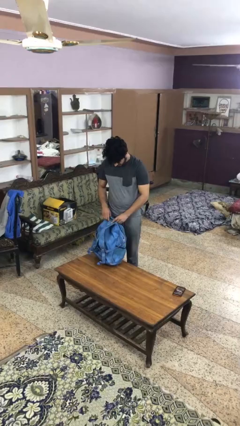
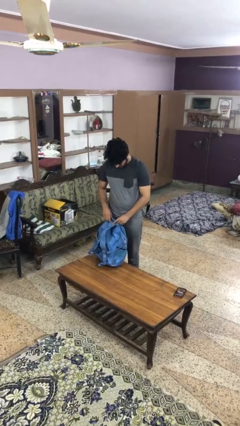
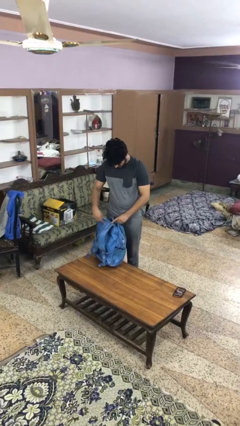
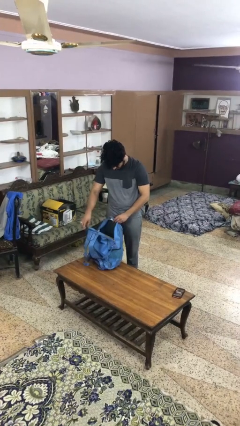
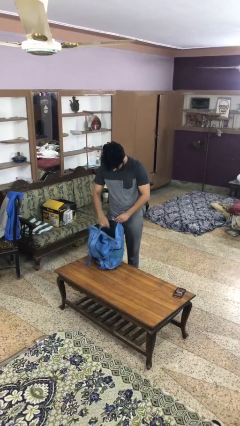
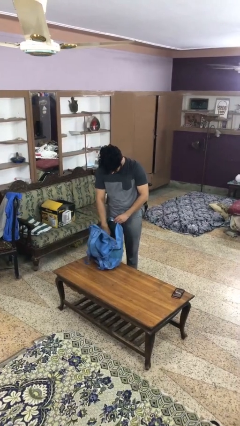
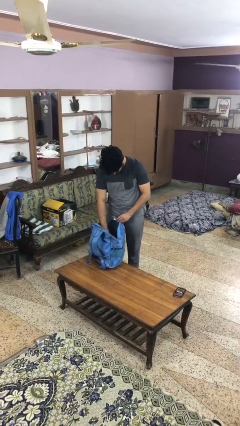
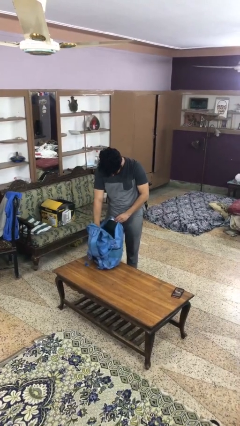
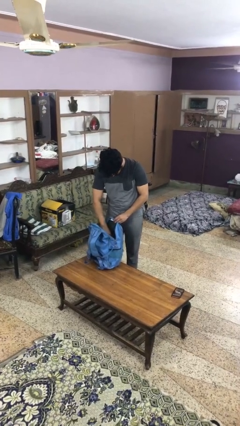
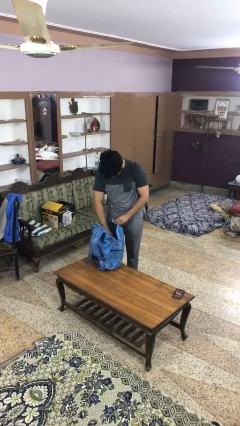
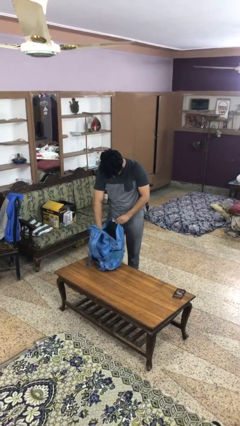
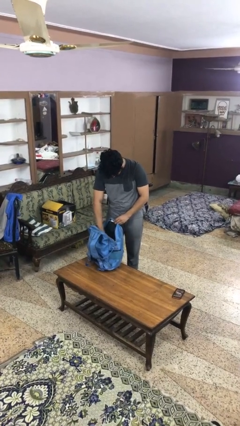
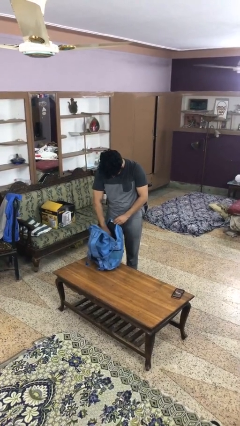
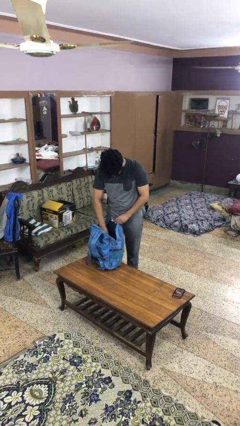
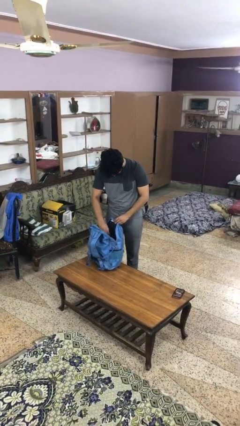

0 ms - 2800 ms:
person searches in bag

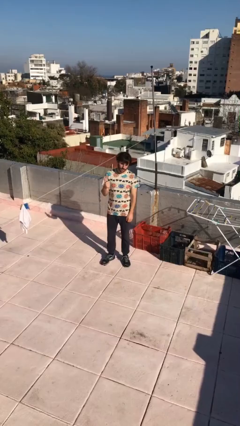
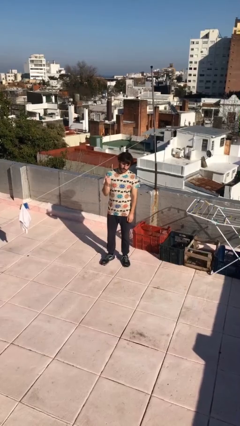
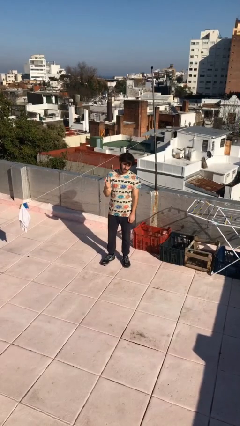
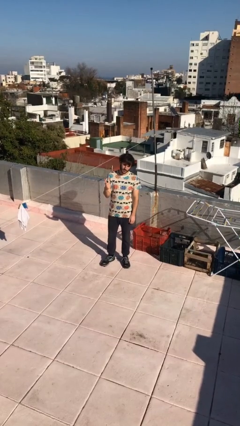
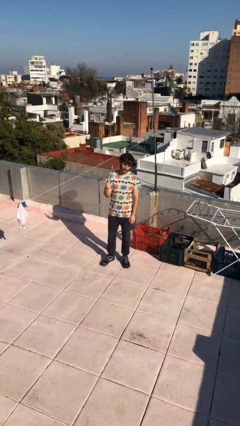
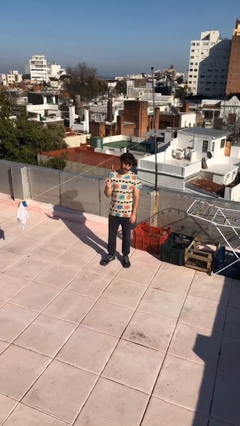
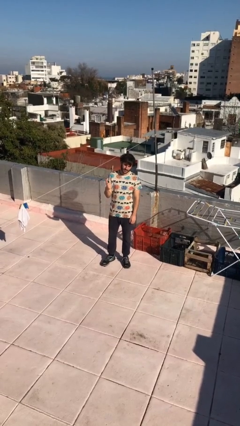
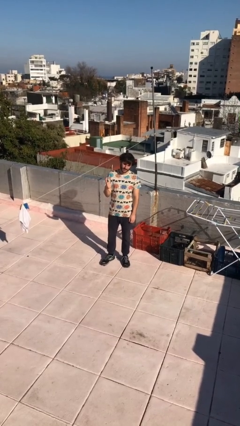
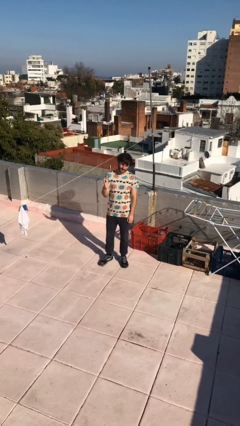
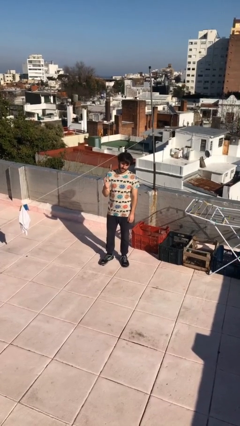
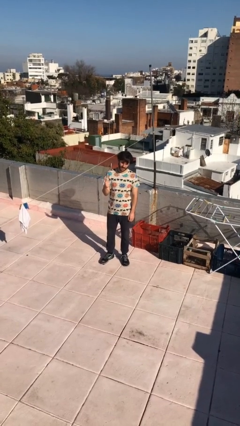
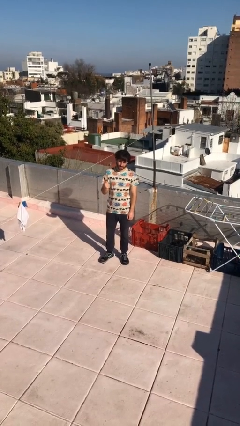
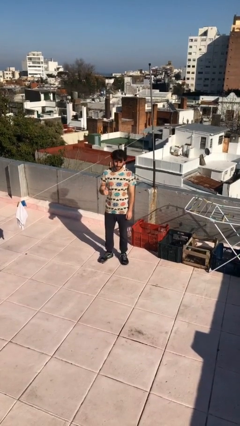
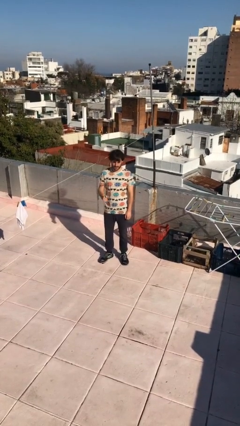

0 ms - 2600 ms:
person gestures thumbs up

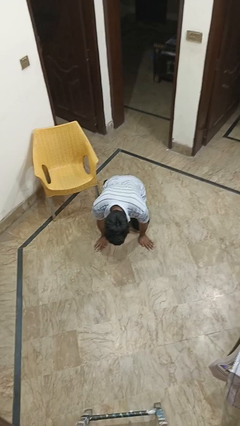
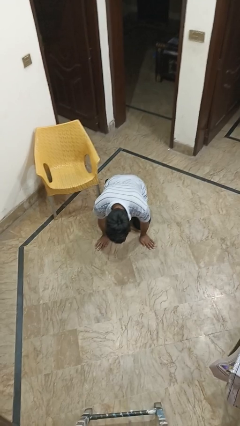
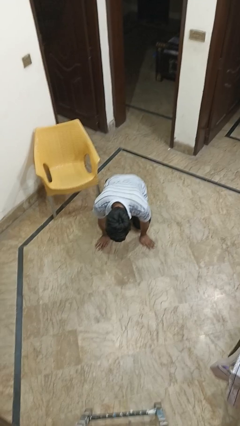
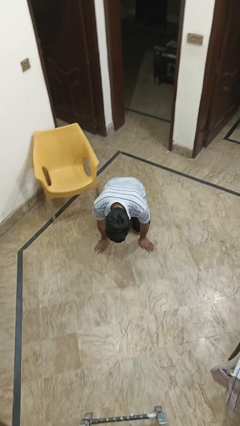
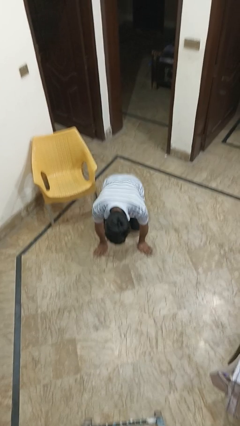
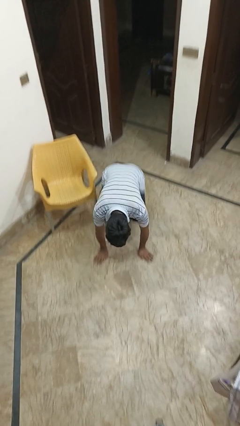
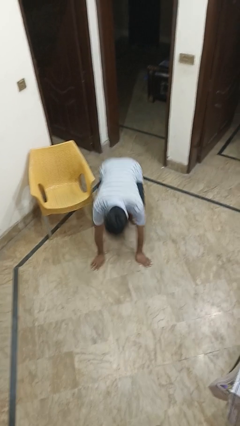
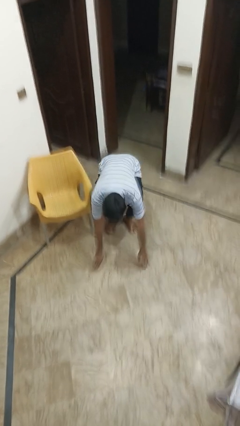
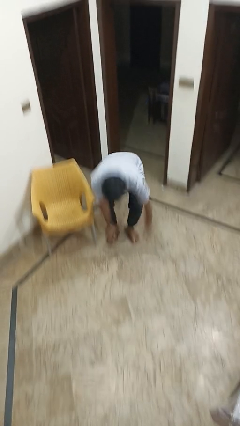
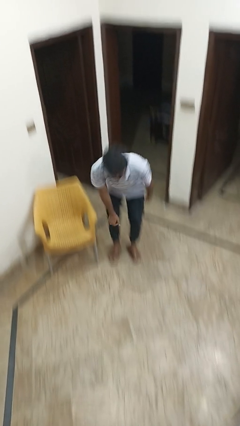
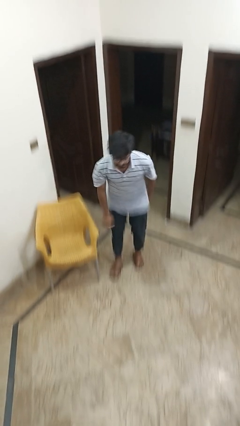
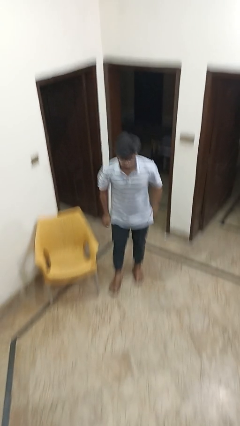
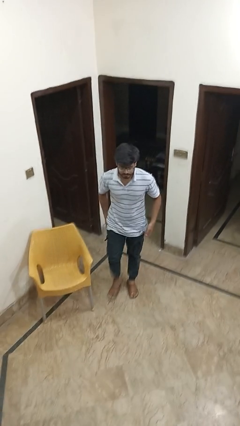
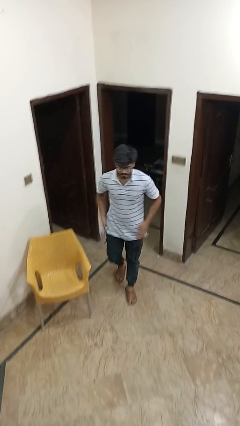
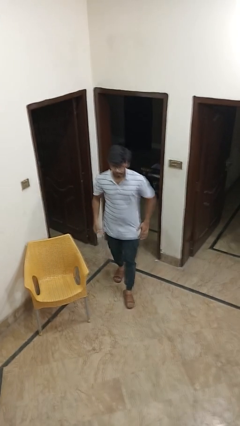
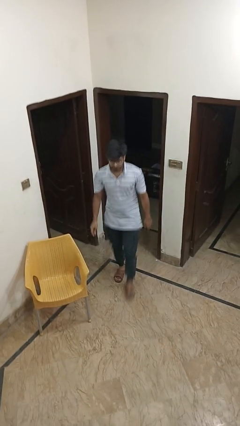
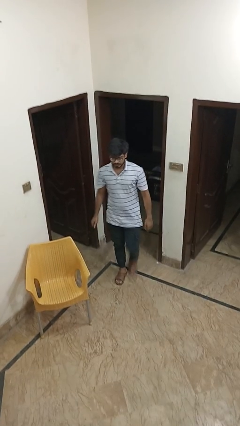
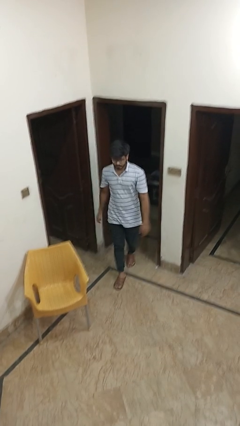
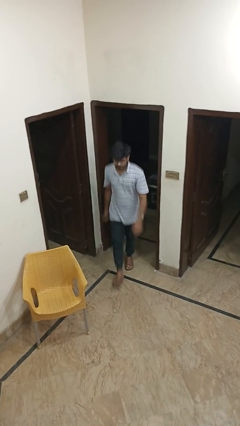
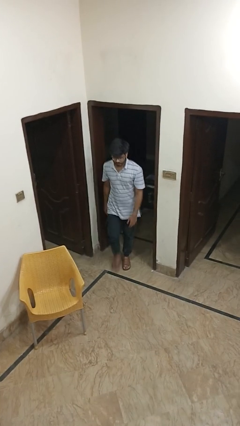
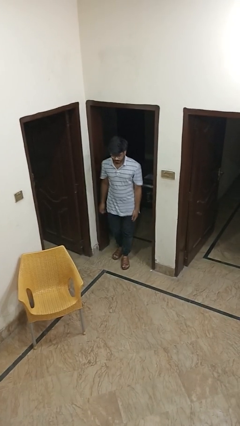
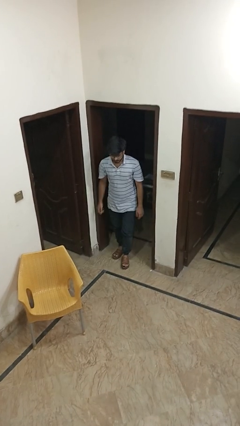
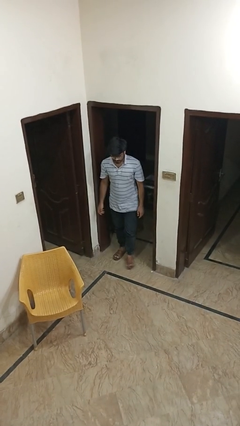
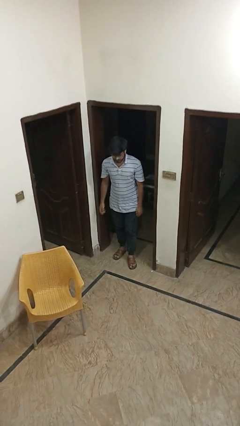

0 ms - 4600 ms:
person stands up from floor

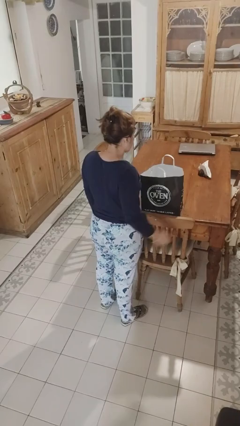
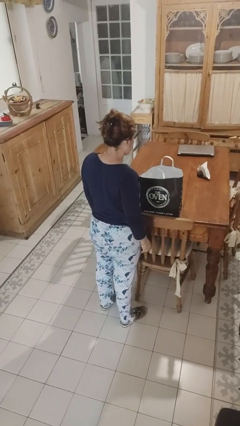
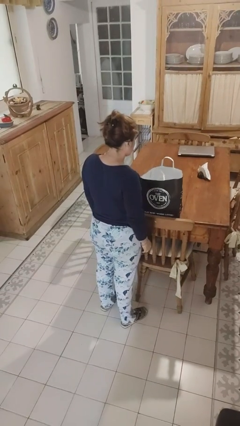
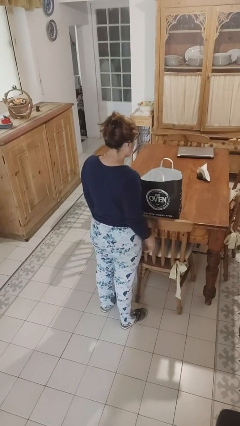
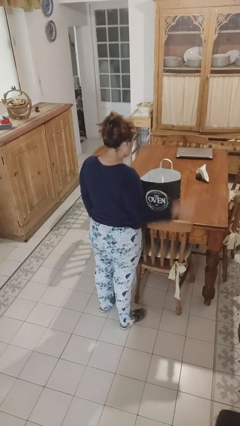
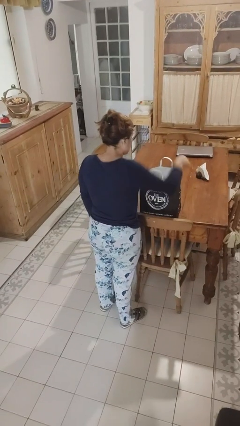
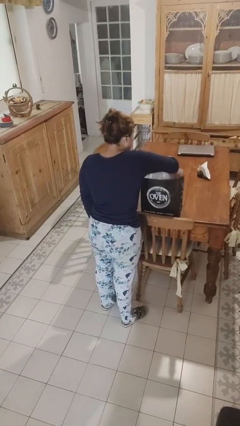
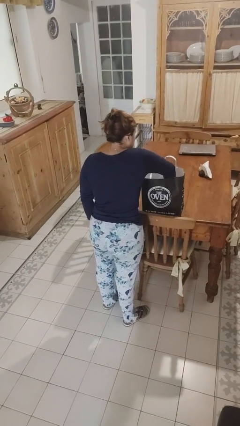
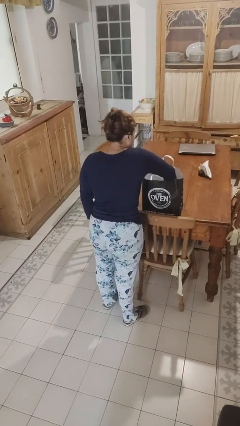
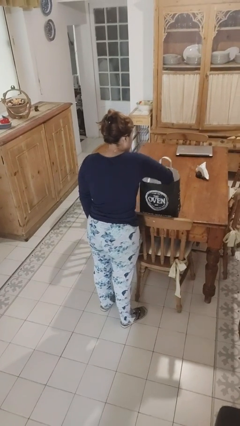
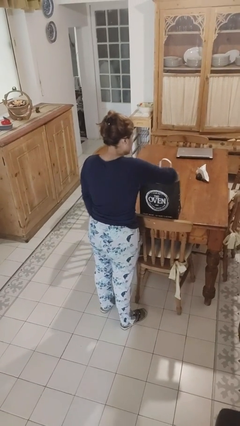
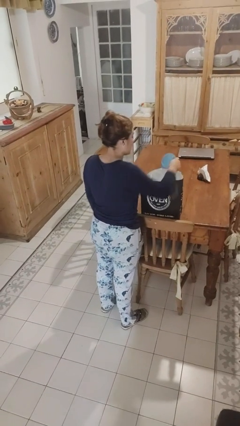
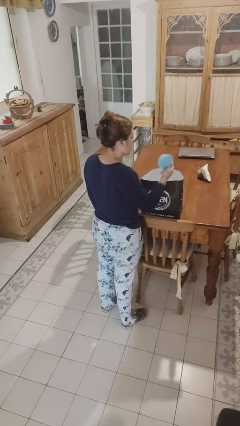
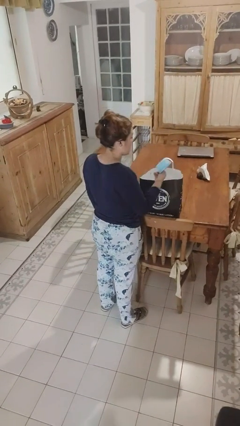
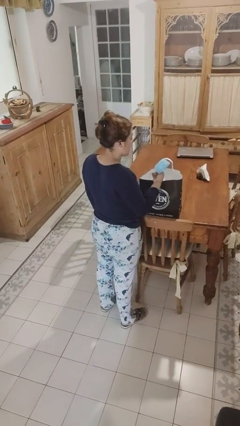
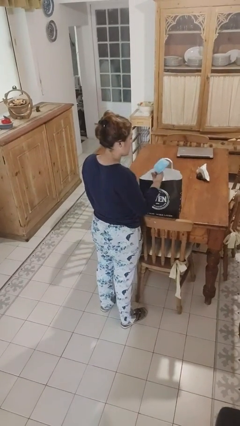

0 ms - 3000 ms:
person takes object from bag

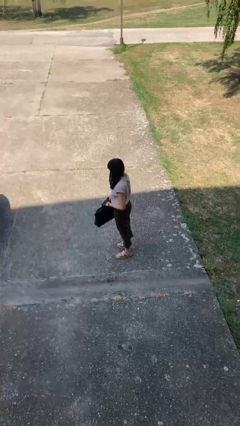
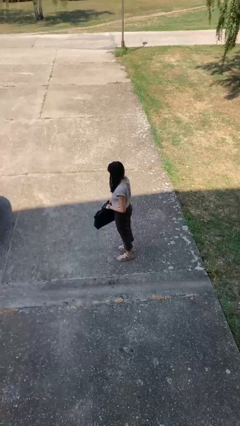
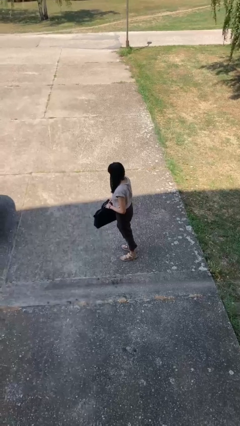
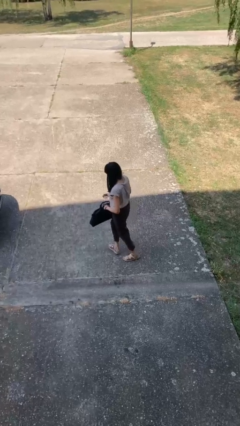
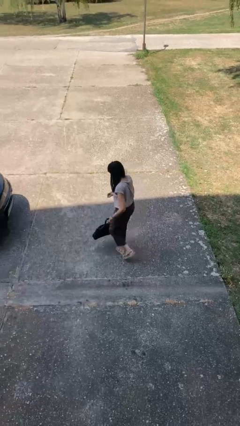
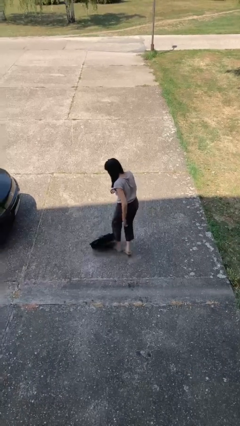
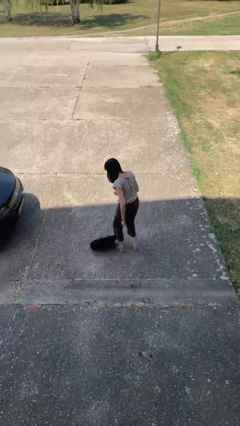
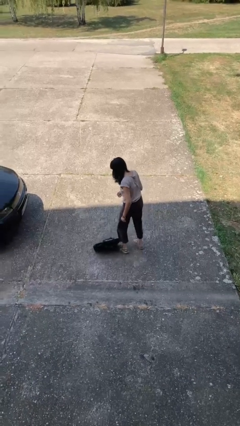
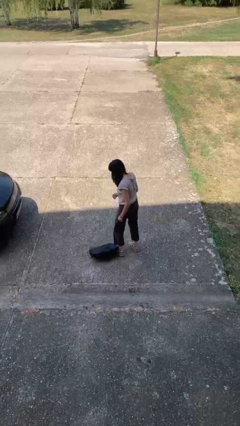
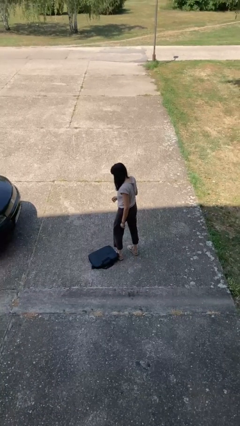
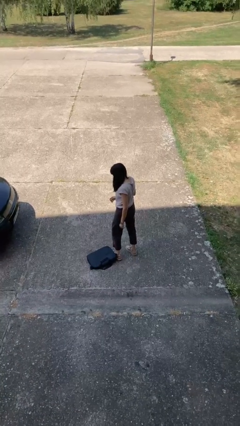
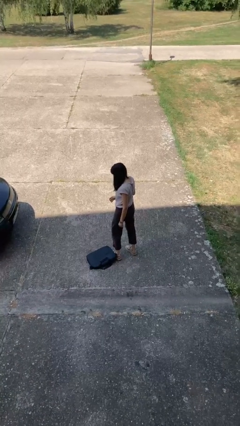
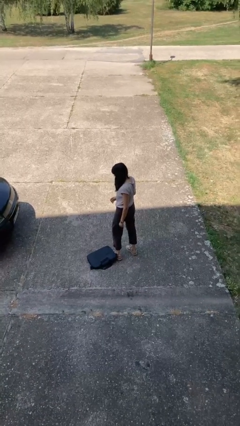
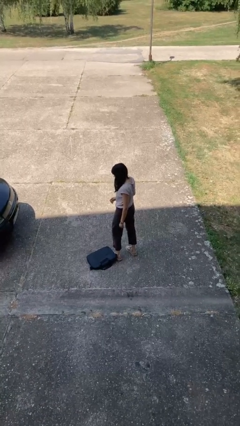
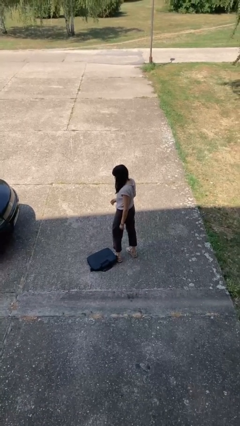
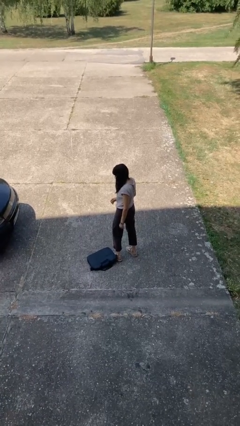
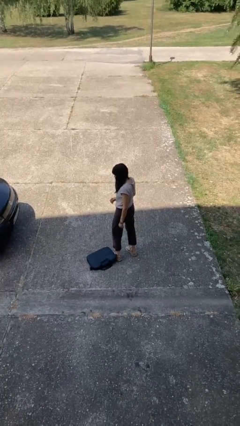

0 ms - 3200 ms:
person drops object

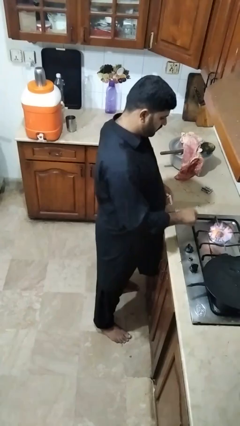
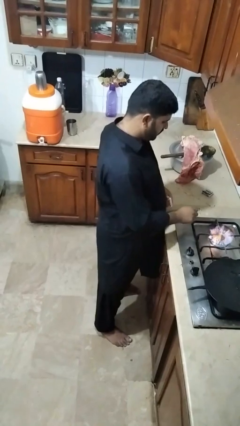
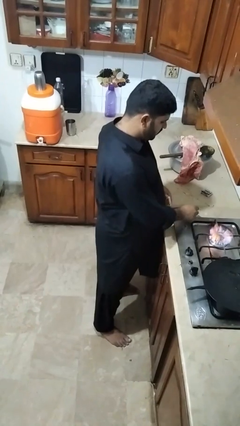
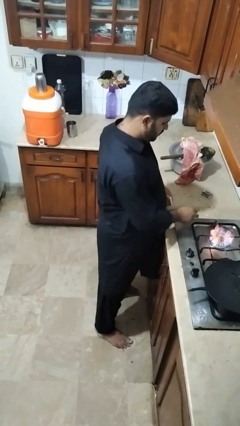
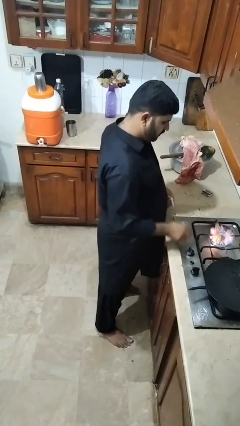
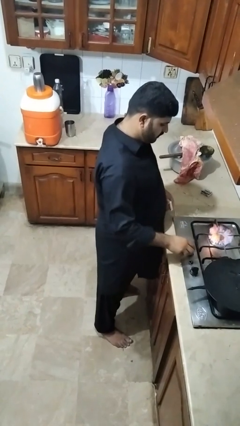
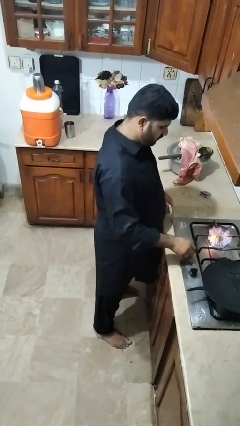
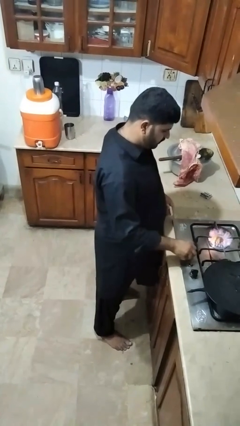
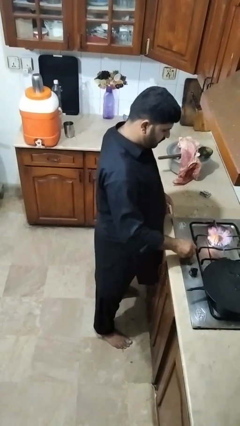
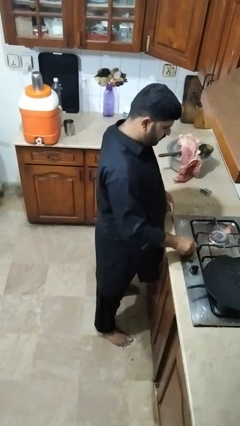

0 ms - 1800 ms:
person turns off stovetop
